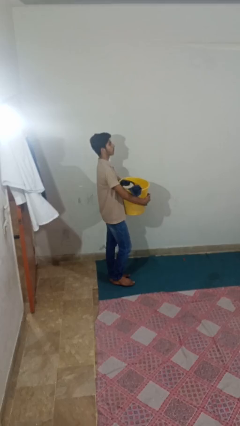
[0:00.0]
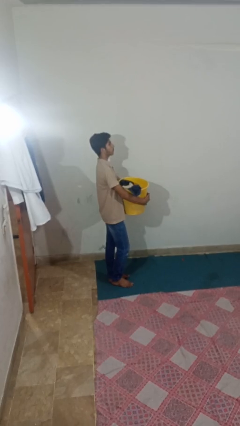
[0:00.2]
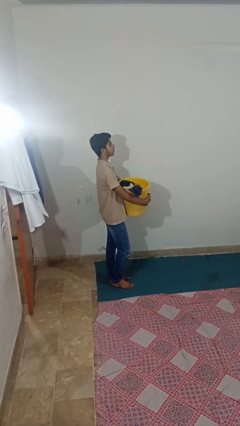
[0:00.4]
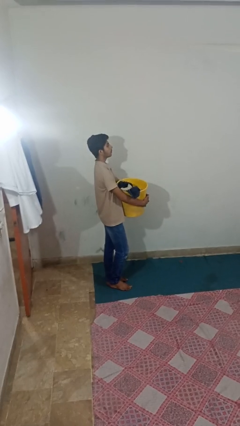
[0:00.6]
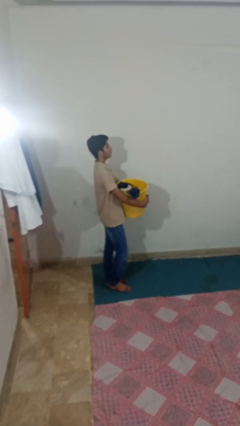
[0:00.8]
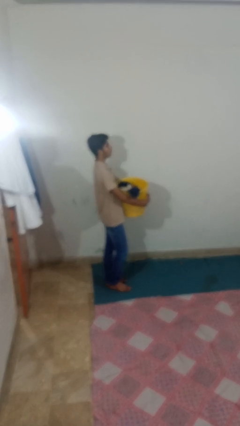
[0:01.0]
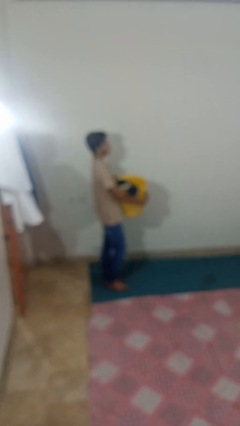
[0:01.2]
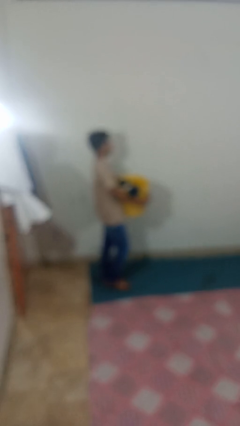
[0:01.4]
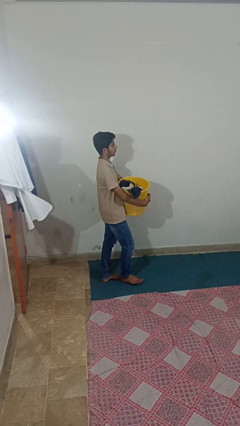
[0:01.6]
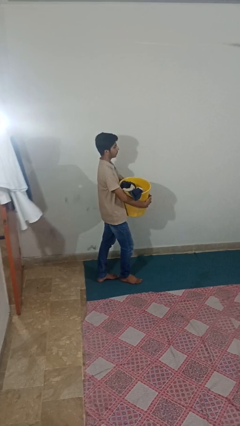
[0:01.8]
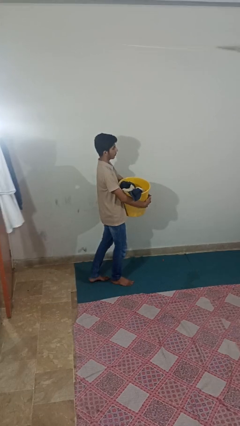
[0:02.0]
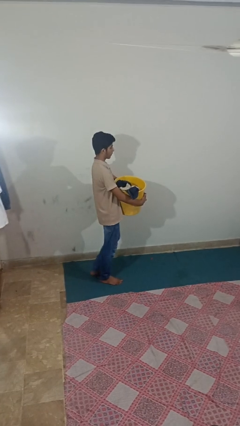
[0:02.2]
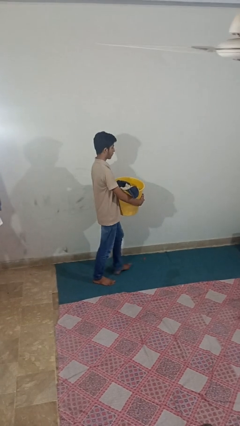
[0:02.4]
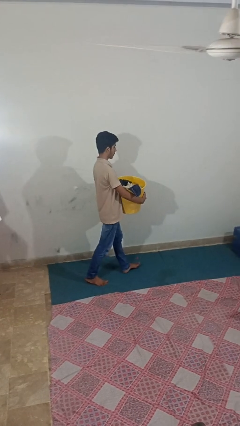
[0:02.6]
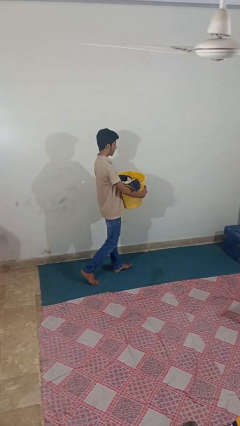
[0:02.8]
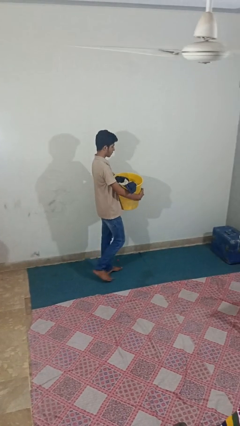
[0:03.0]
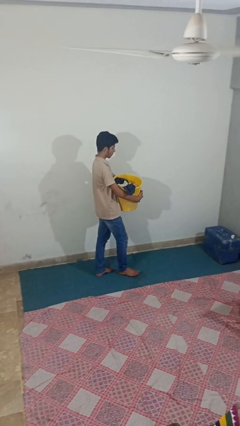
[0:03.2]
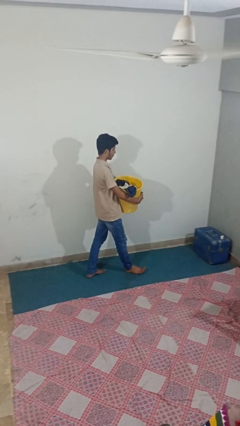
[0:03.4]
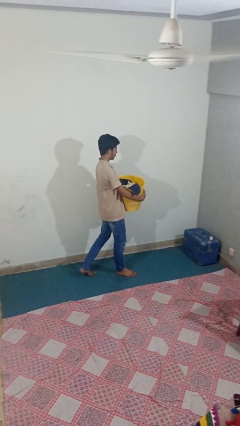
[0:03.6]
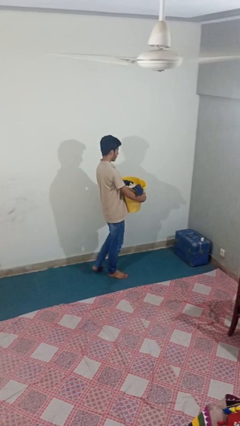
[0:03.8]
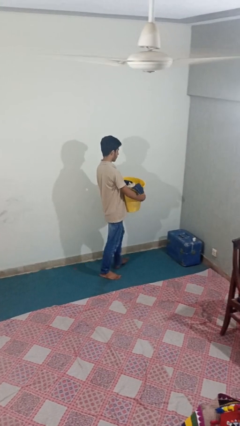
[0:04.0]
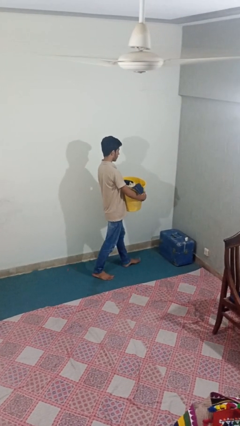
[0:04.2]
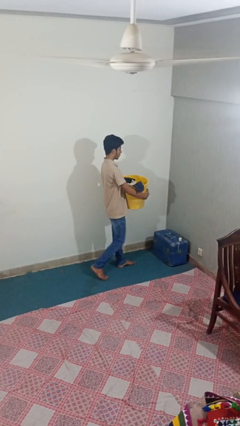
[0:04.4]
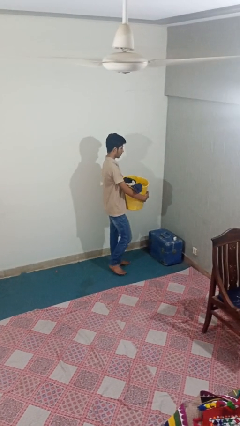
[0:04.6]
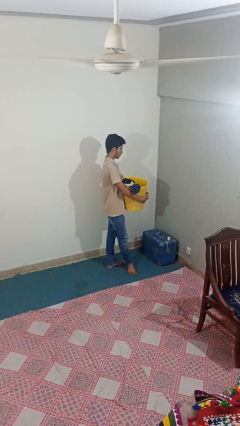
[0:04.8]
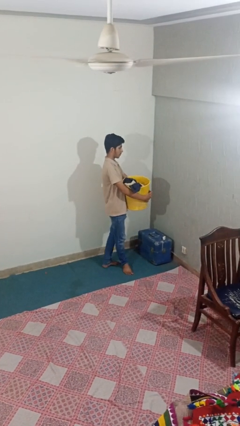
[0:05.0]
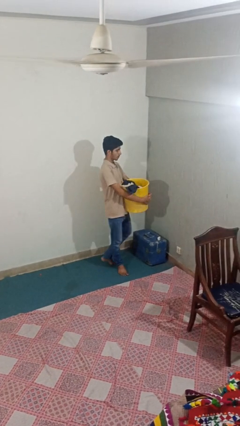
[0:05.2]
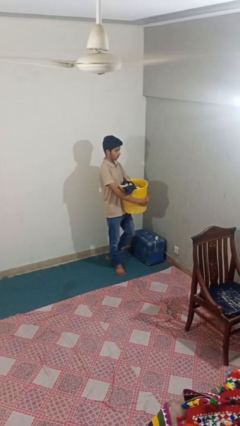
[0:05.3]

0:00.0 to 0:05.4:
person carries laundry basket

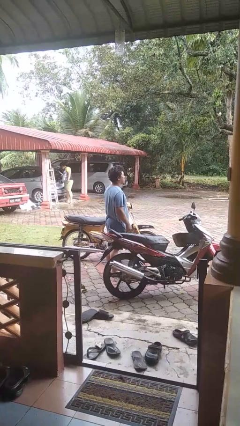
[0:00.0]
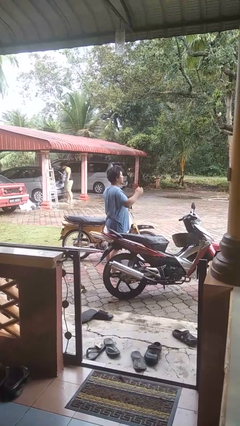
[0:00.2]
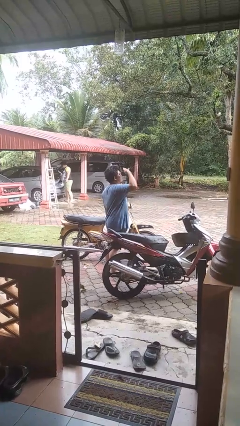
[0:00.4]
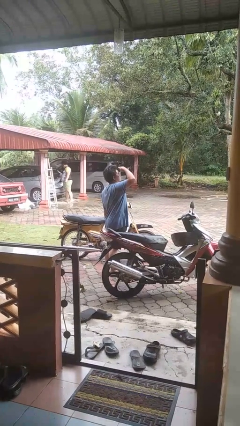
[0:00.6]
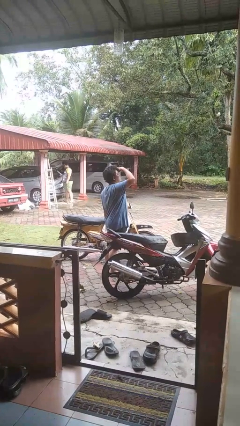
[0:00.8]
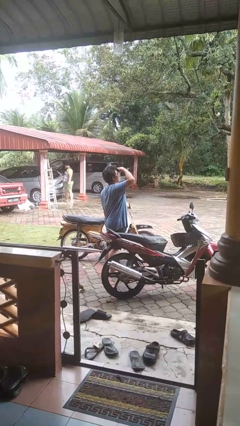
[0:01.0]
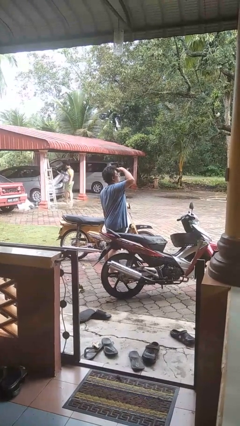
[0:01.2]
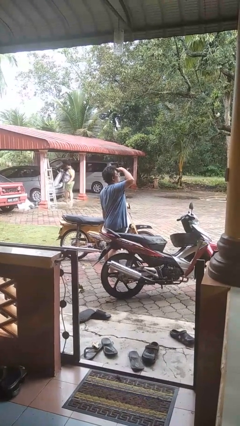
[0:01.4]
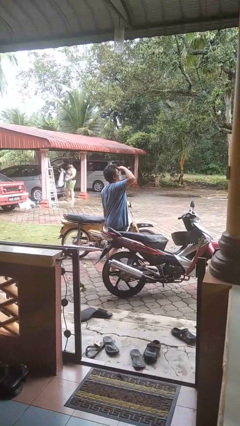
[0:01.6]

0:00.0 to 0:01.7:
person shades eyes

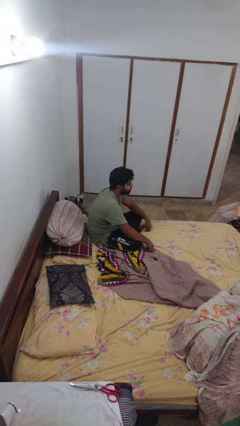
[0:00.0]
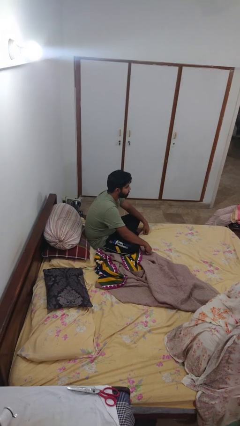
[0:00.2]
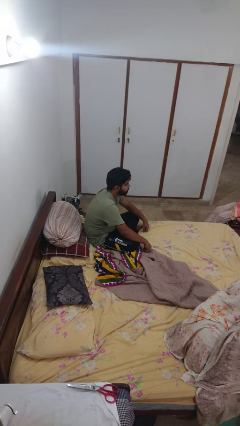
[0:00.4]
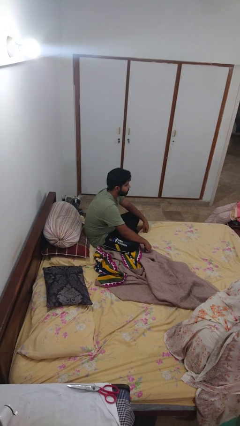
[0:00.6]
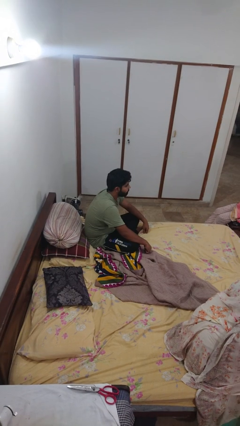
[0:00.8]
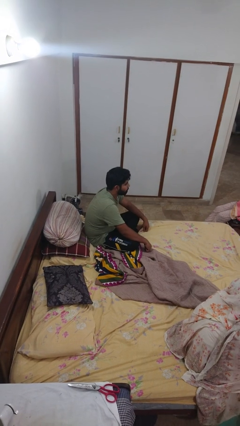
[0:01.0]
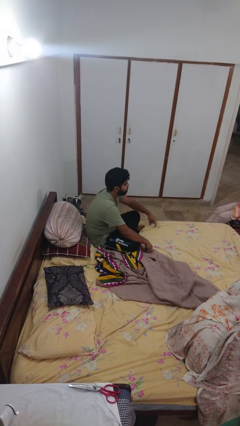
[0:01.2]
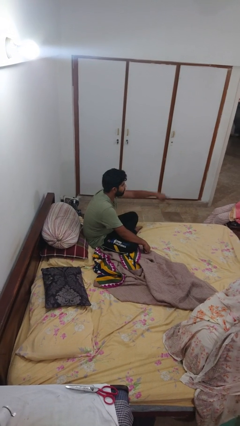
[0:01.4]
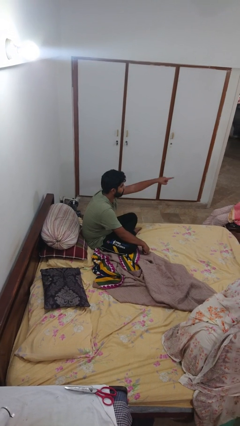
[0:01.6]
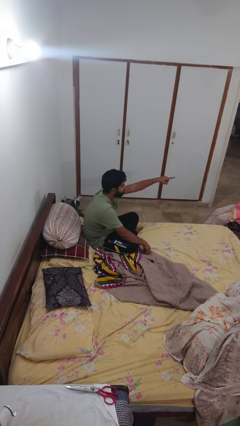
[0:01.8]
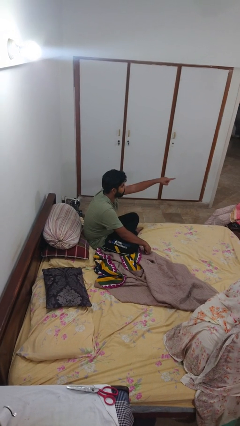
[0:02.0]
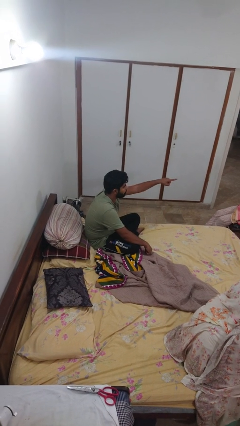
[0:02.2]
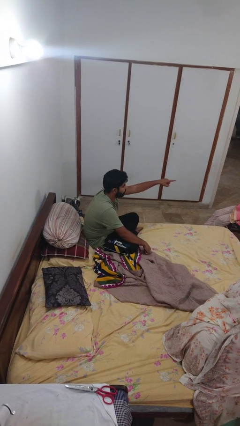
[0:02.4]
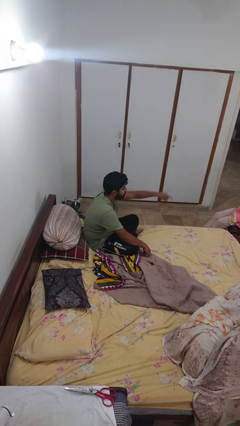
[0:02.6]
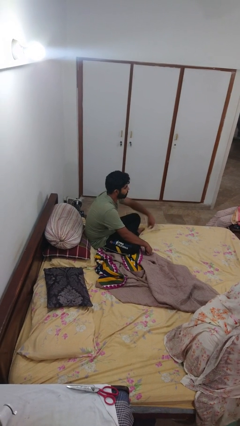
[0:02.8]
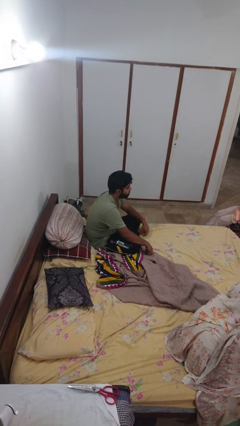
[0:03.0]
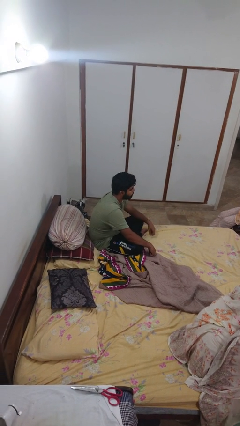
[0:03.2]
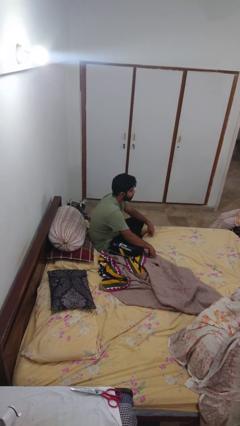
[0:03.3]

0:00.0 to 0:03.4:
person points at person

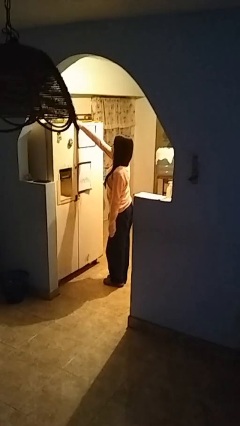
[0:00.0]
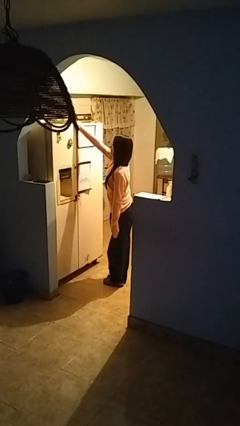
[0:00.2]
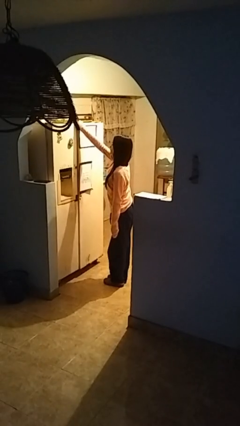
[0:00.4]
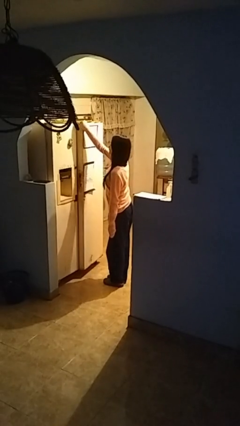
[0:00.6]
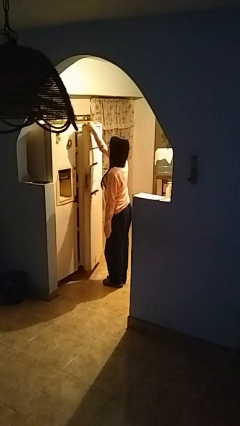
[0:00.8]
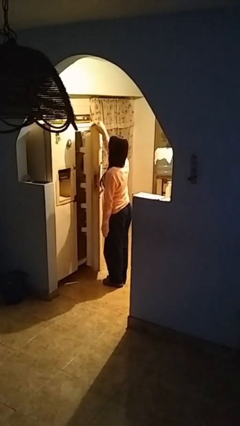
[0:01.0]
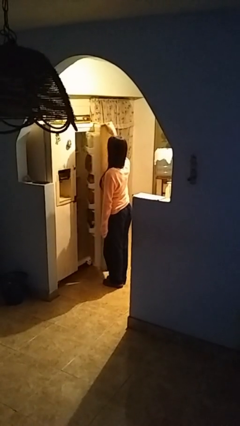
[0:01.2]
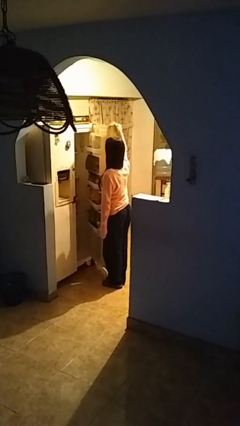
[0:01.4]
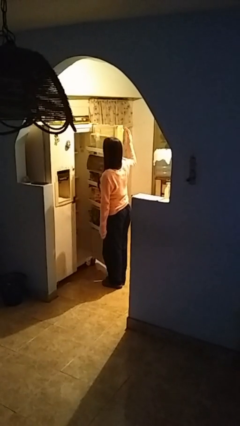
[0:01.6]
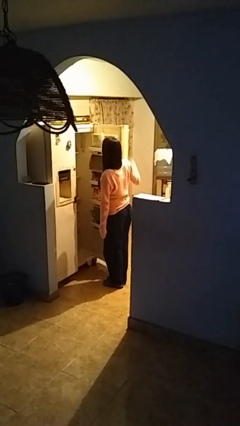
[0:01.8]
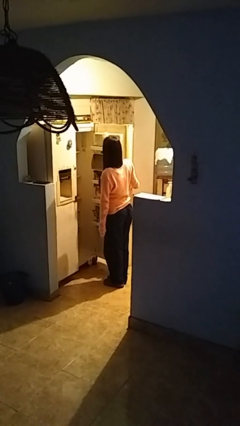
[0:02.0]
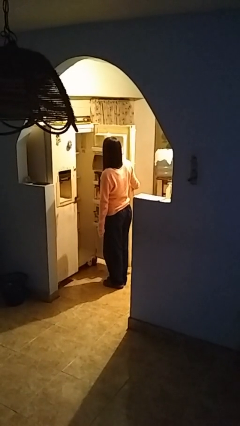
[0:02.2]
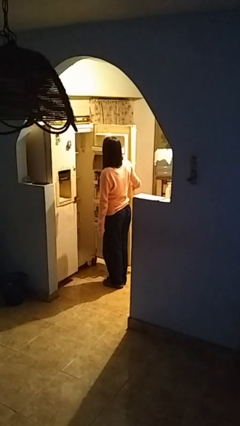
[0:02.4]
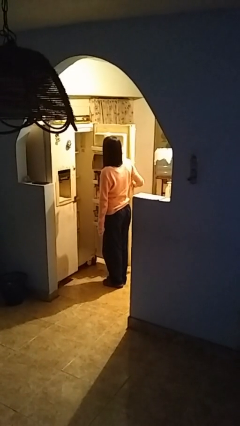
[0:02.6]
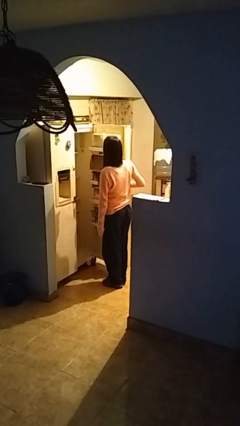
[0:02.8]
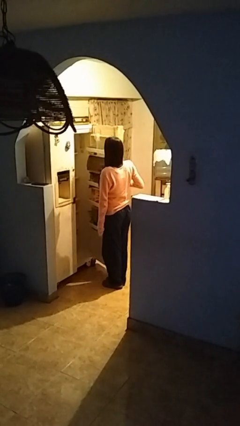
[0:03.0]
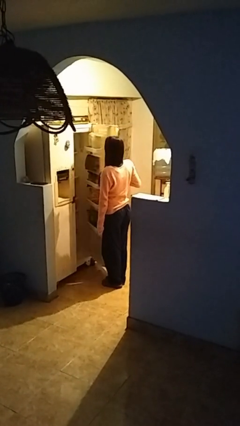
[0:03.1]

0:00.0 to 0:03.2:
person opens refrigerator

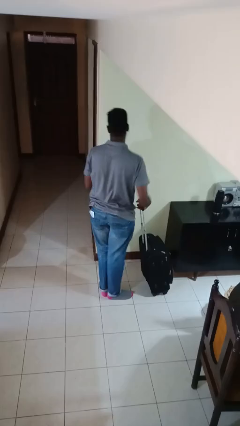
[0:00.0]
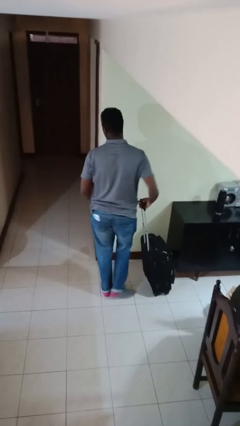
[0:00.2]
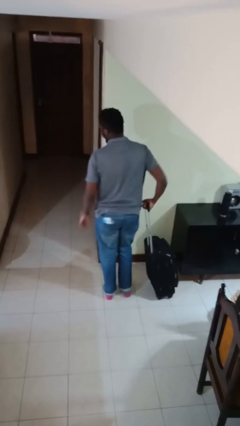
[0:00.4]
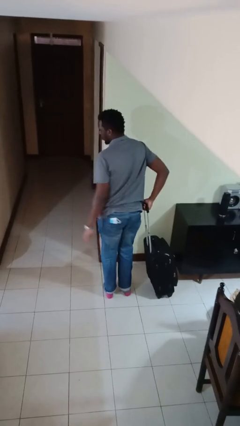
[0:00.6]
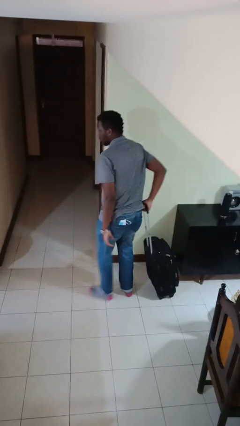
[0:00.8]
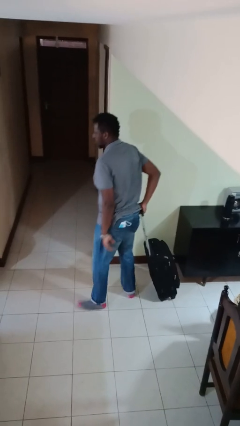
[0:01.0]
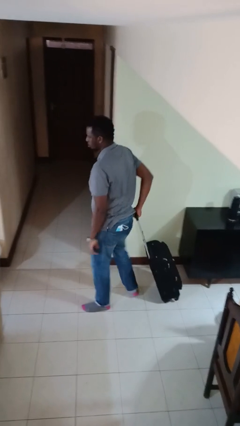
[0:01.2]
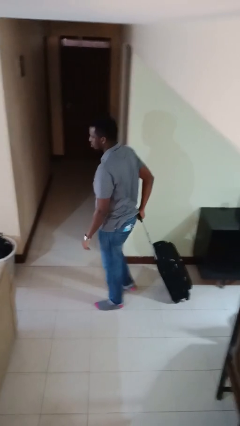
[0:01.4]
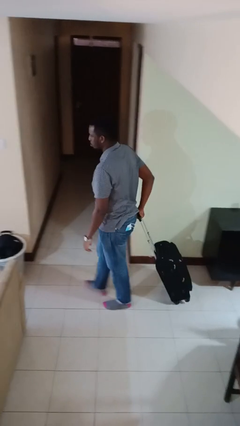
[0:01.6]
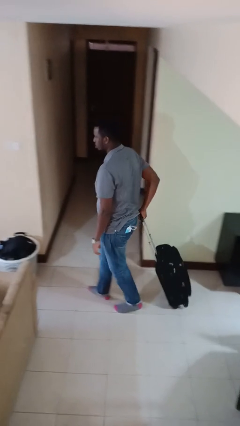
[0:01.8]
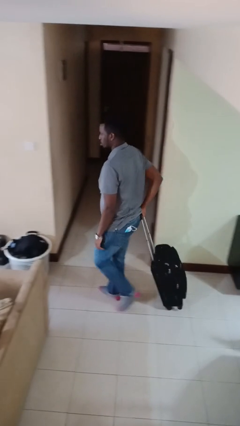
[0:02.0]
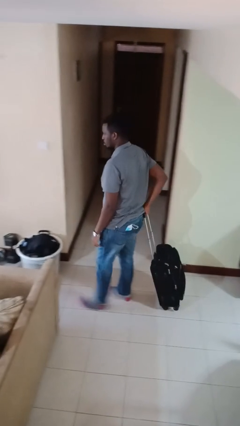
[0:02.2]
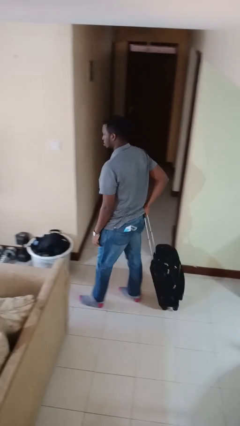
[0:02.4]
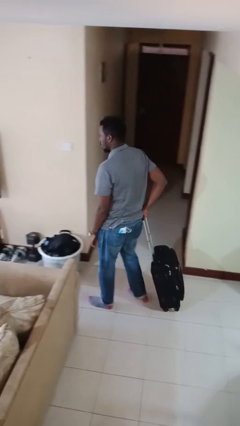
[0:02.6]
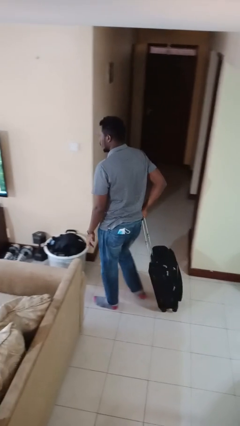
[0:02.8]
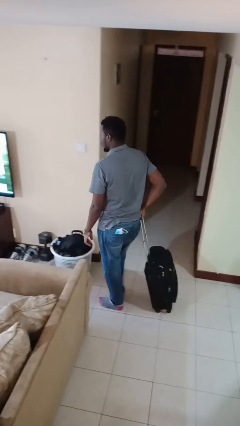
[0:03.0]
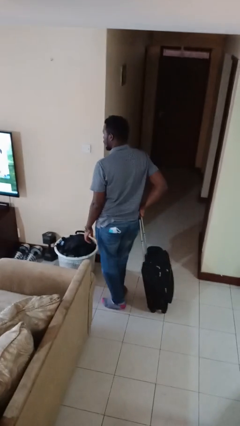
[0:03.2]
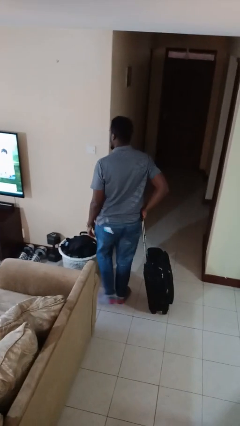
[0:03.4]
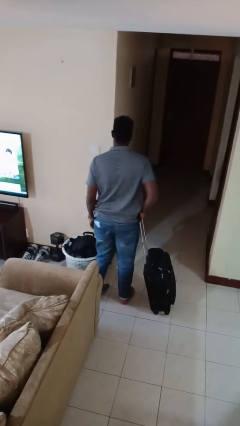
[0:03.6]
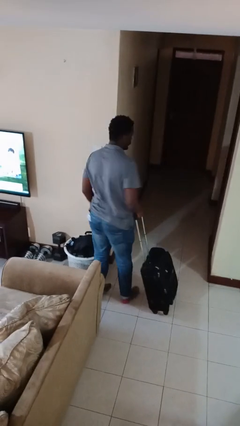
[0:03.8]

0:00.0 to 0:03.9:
person pulls wheeled cart

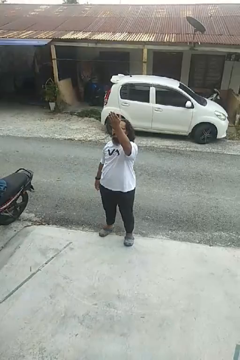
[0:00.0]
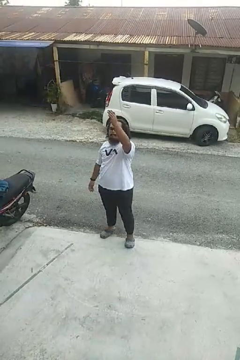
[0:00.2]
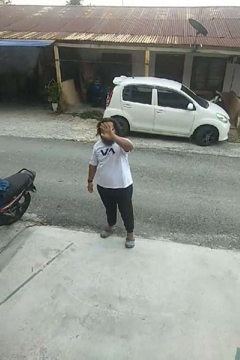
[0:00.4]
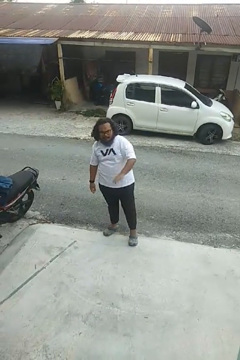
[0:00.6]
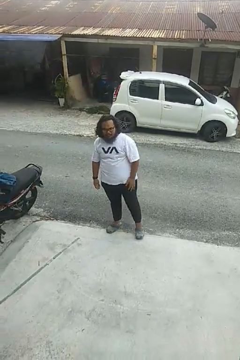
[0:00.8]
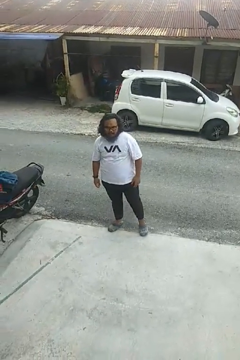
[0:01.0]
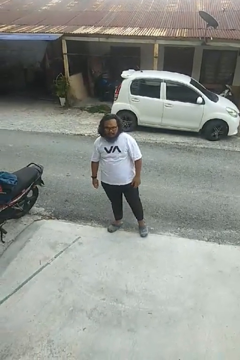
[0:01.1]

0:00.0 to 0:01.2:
person gestures swipe down
